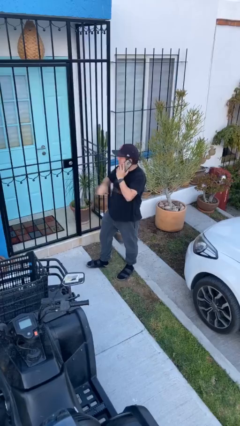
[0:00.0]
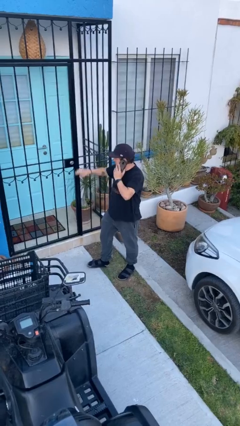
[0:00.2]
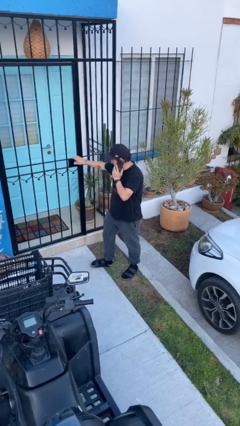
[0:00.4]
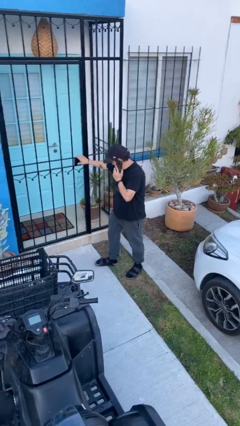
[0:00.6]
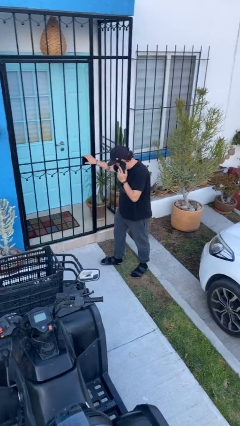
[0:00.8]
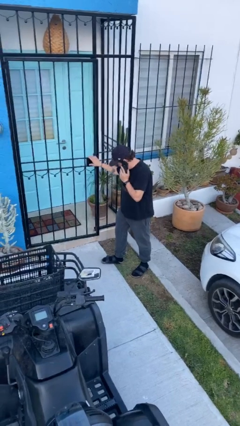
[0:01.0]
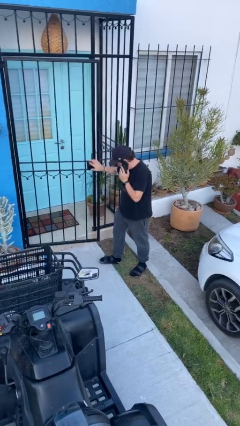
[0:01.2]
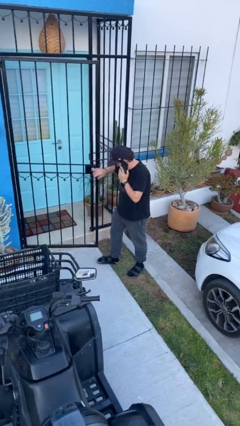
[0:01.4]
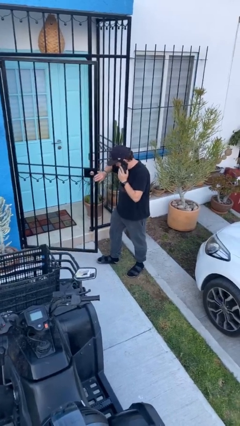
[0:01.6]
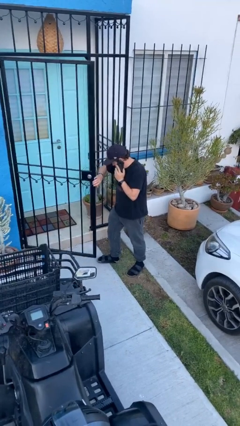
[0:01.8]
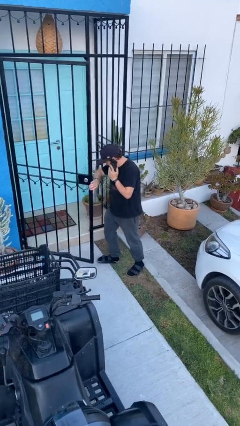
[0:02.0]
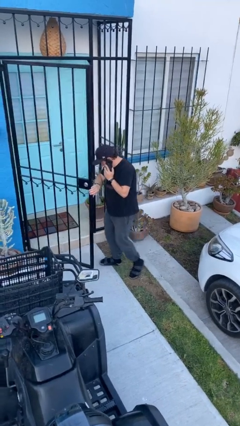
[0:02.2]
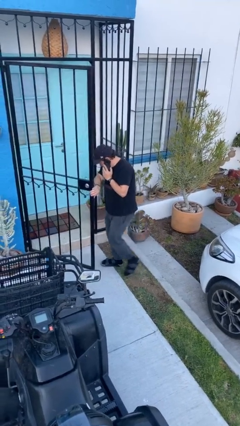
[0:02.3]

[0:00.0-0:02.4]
person opens facility door

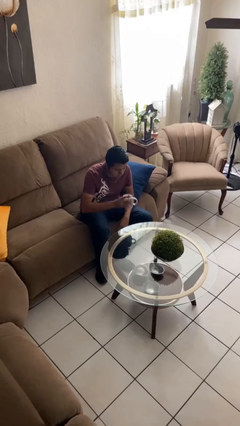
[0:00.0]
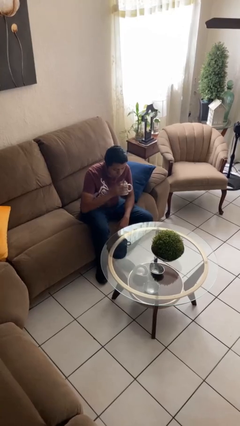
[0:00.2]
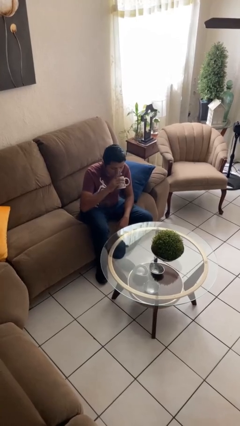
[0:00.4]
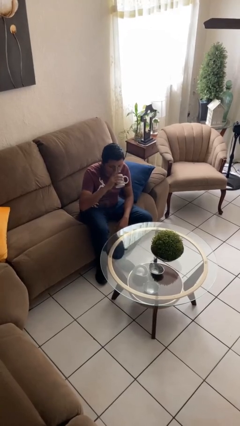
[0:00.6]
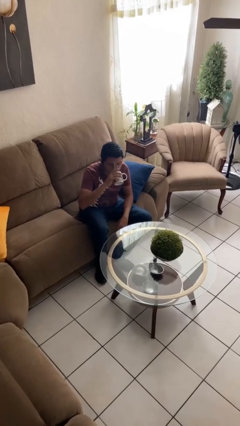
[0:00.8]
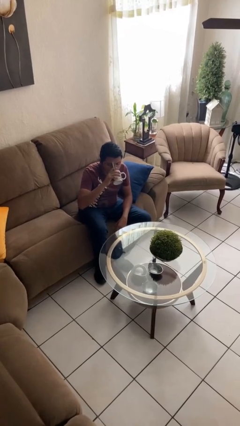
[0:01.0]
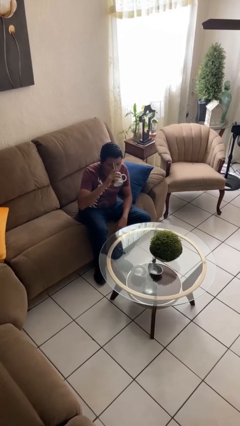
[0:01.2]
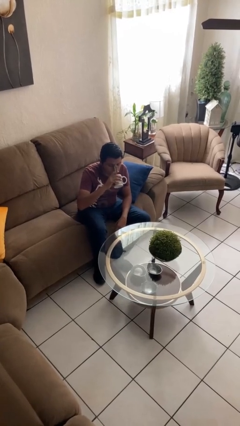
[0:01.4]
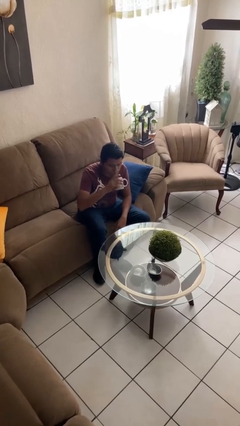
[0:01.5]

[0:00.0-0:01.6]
person drinks from mug

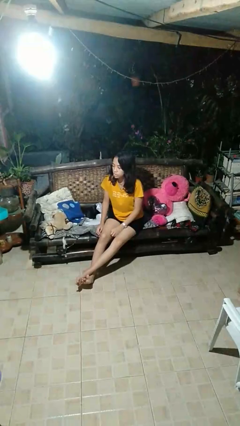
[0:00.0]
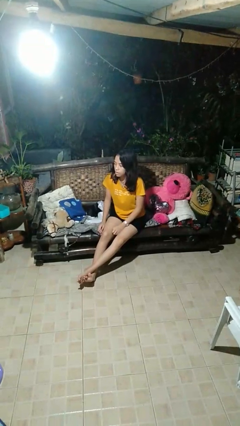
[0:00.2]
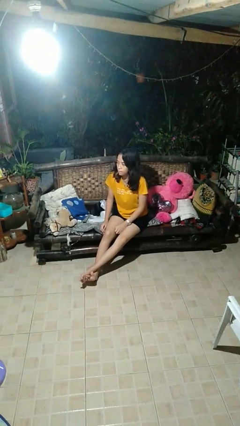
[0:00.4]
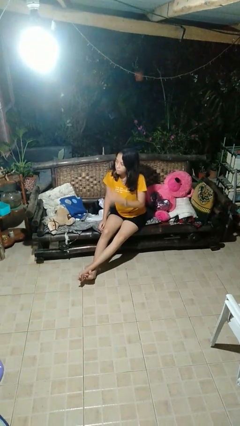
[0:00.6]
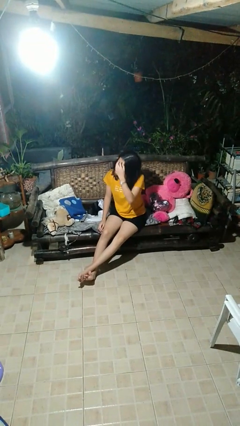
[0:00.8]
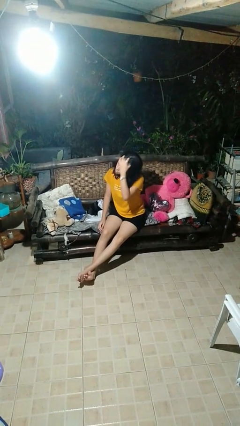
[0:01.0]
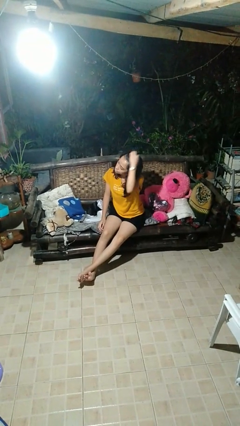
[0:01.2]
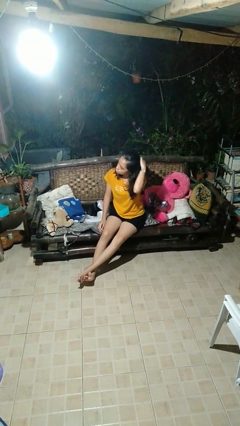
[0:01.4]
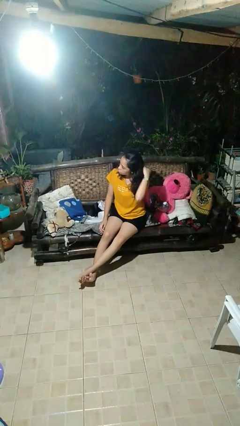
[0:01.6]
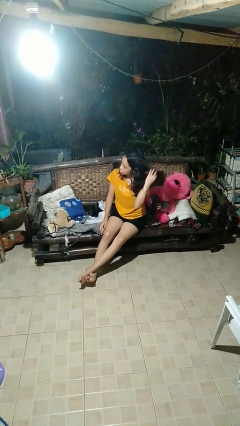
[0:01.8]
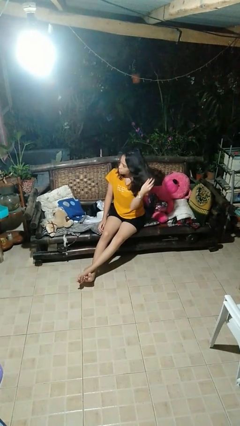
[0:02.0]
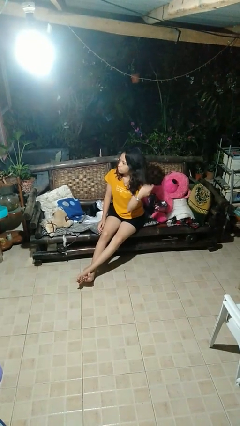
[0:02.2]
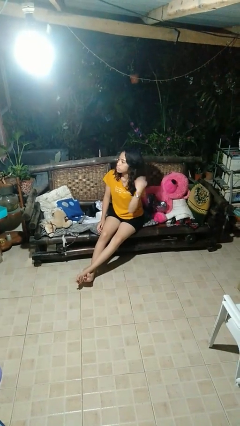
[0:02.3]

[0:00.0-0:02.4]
person strokes hair

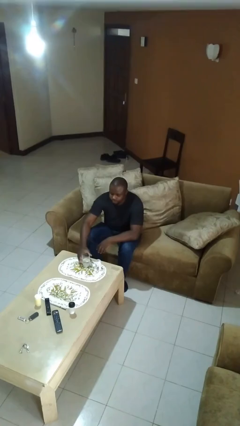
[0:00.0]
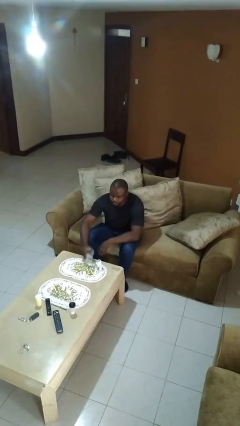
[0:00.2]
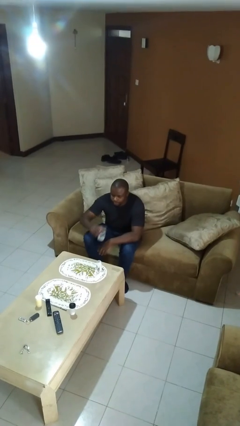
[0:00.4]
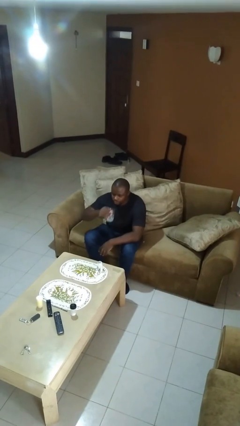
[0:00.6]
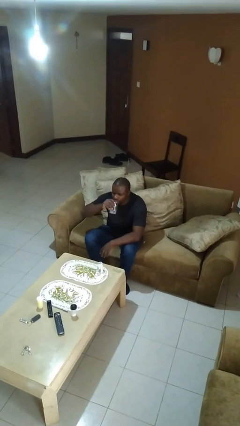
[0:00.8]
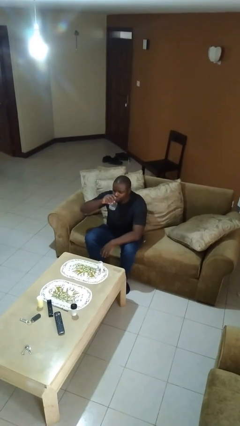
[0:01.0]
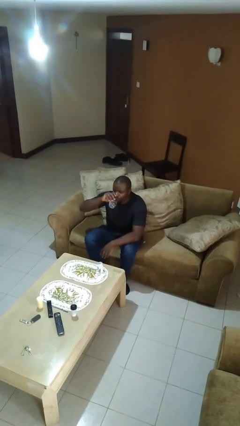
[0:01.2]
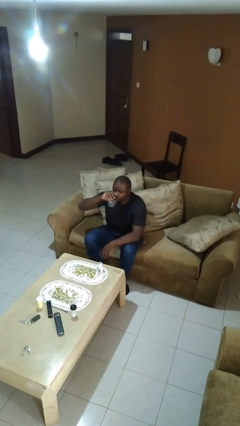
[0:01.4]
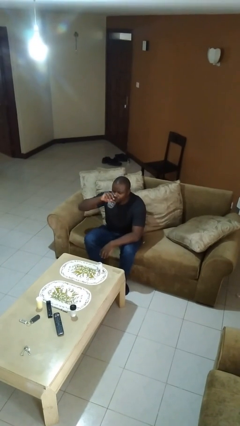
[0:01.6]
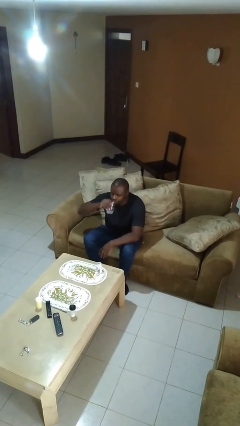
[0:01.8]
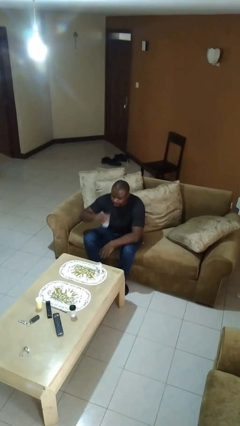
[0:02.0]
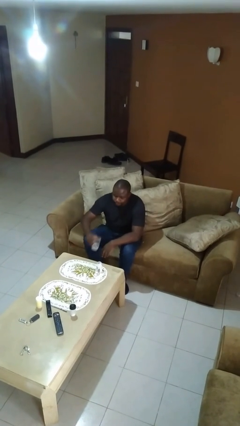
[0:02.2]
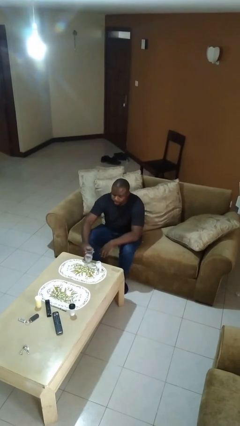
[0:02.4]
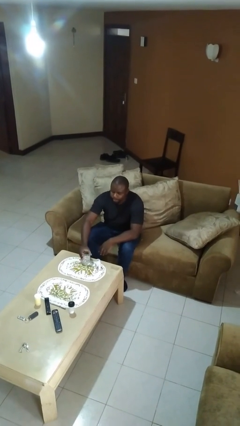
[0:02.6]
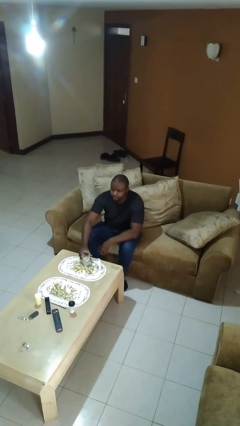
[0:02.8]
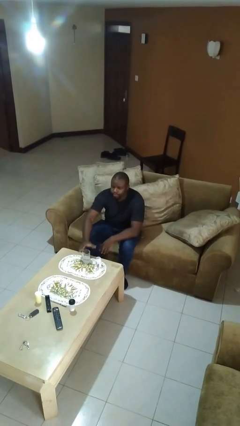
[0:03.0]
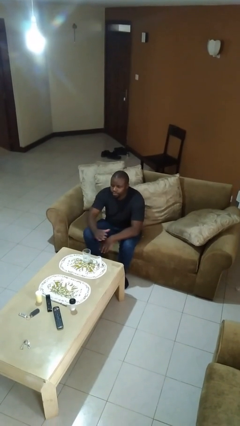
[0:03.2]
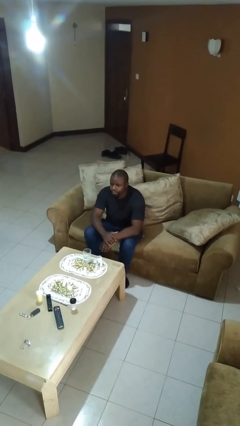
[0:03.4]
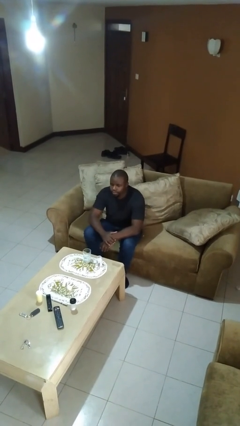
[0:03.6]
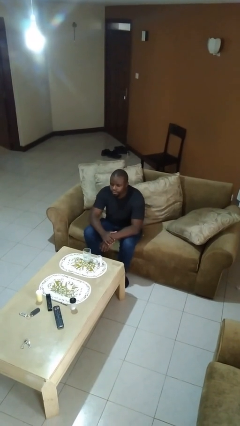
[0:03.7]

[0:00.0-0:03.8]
person drinks from cup

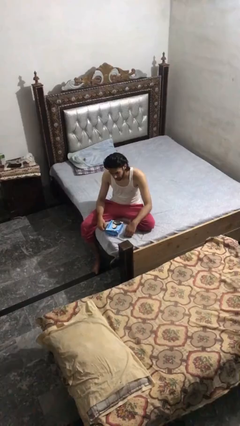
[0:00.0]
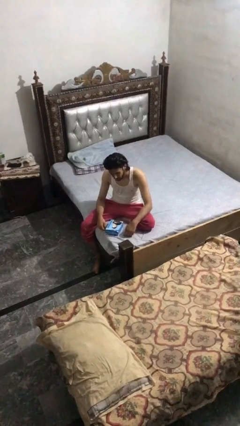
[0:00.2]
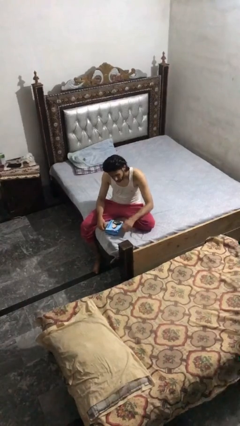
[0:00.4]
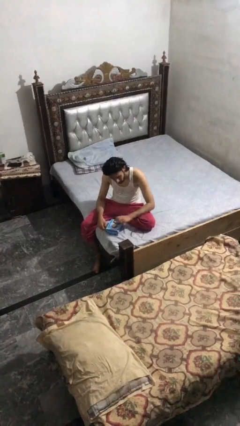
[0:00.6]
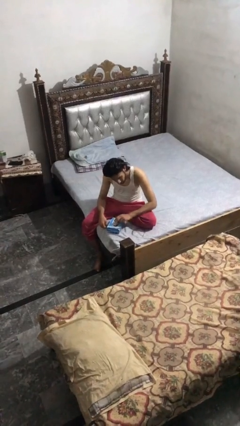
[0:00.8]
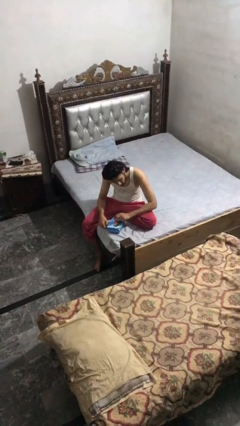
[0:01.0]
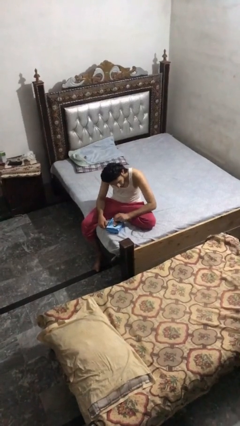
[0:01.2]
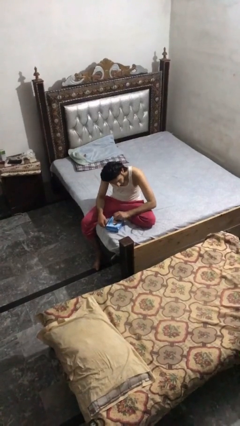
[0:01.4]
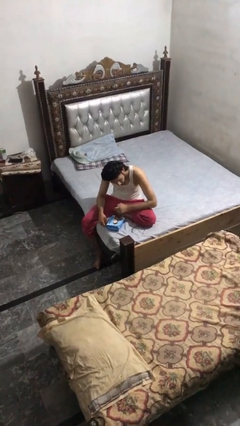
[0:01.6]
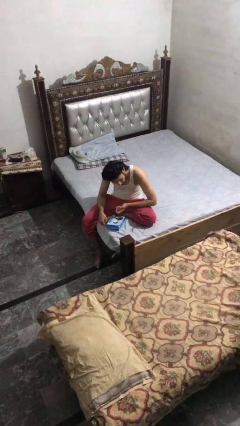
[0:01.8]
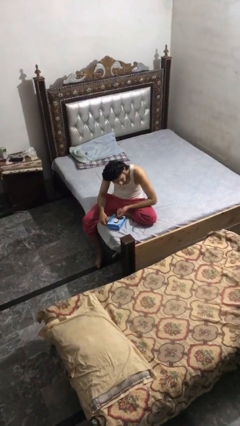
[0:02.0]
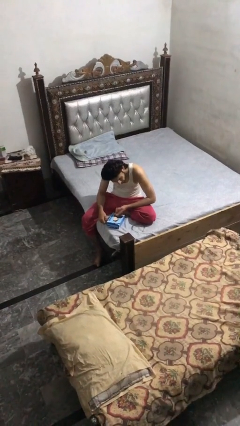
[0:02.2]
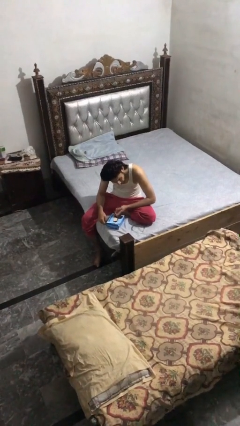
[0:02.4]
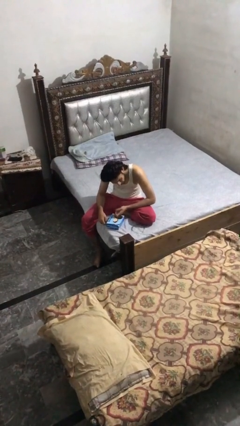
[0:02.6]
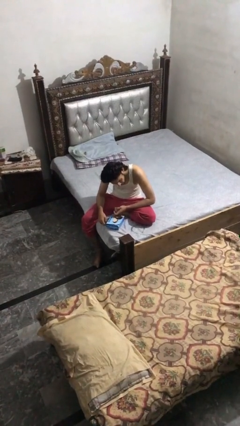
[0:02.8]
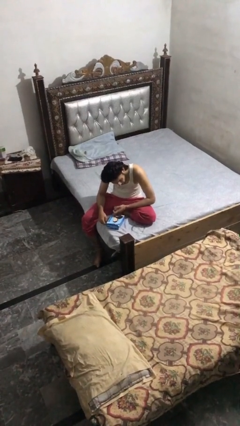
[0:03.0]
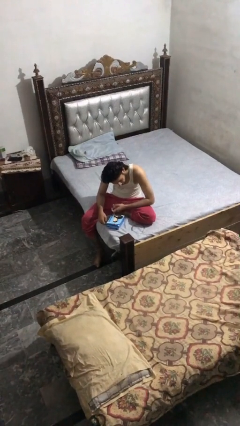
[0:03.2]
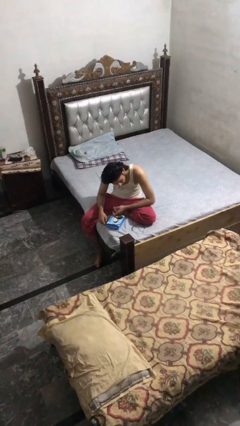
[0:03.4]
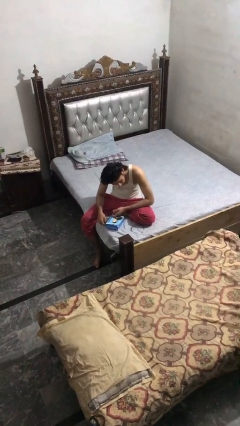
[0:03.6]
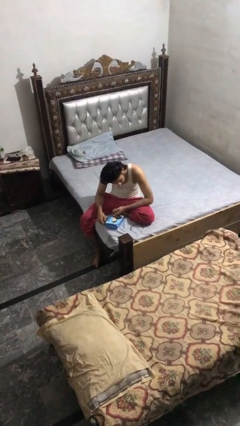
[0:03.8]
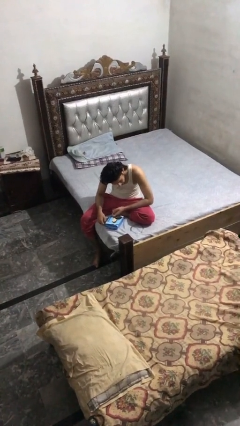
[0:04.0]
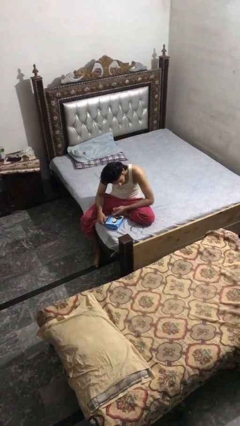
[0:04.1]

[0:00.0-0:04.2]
person taps object with finger

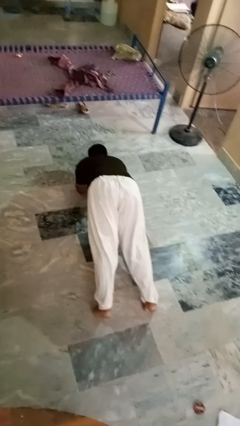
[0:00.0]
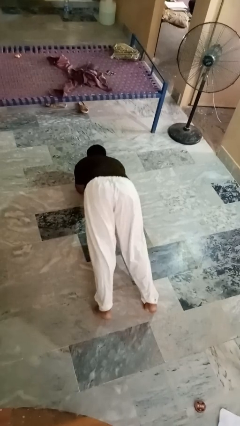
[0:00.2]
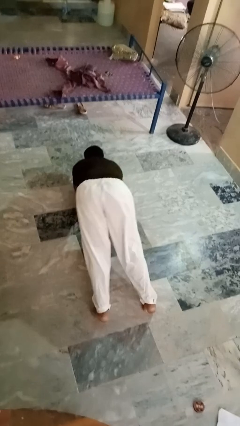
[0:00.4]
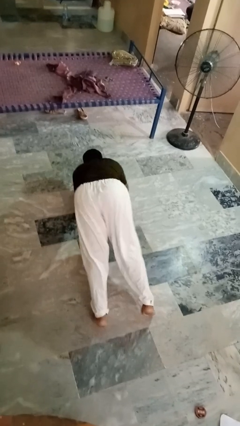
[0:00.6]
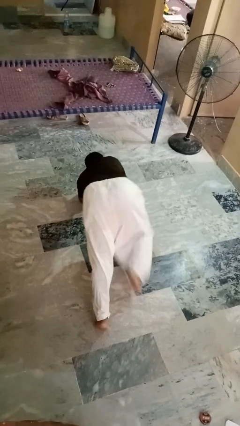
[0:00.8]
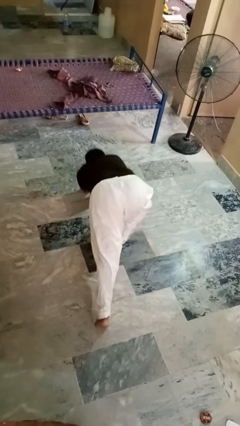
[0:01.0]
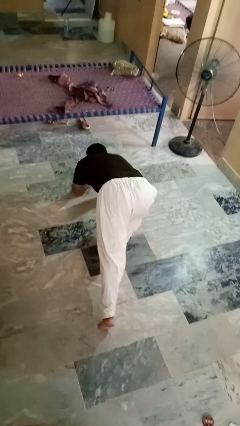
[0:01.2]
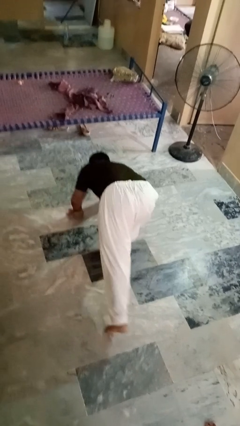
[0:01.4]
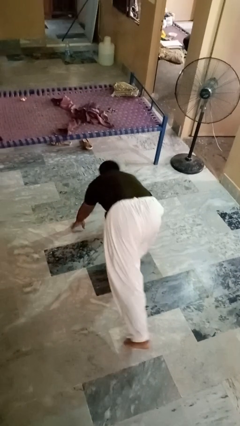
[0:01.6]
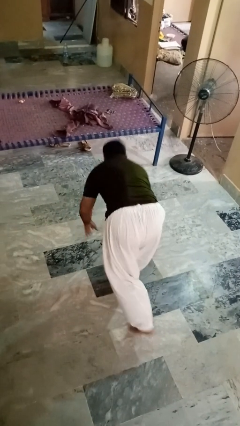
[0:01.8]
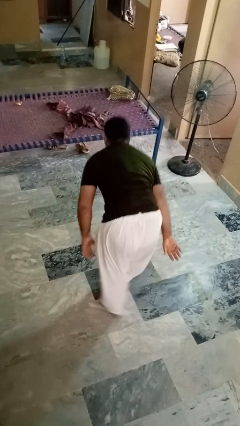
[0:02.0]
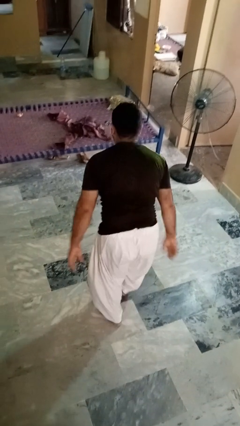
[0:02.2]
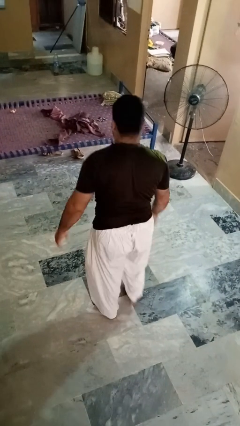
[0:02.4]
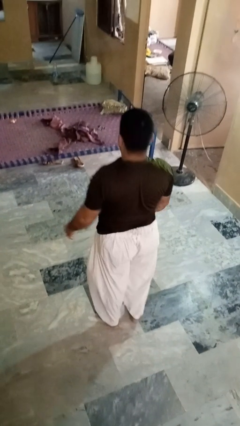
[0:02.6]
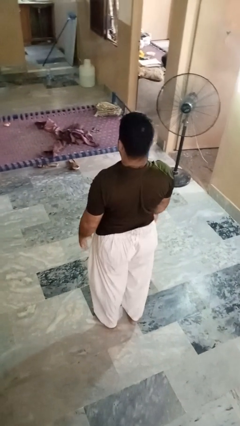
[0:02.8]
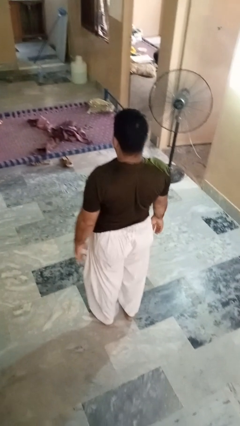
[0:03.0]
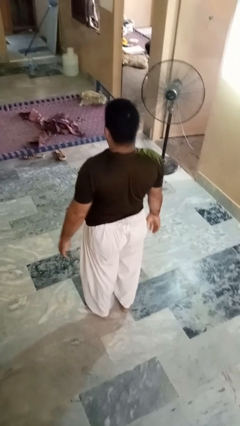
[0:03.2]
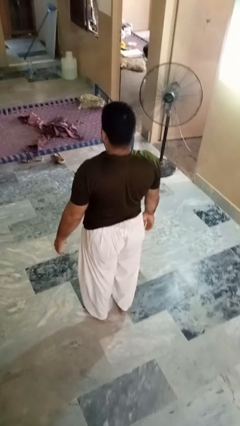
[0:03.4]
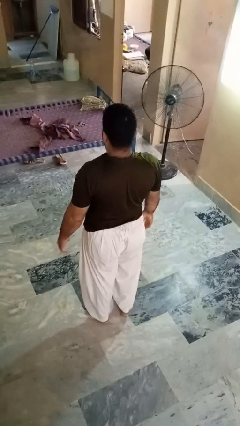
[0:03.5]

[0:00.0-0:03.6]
person stands up from floor
